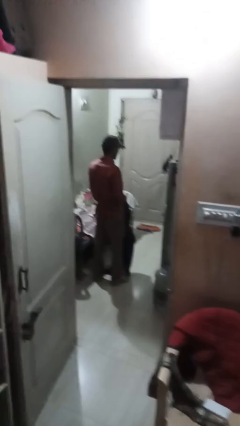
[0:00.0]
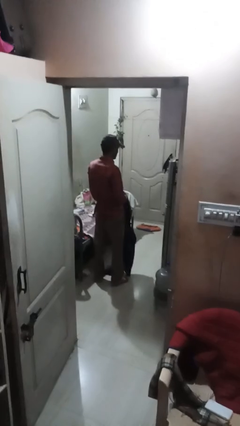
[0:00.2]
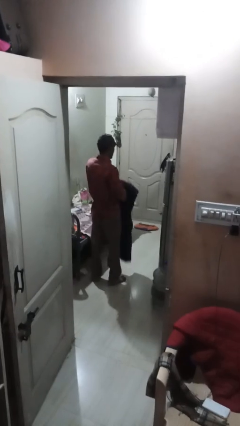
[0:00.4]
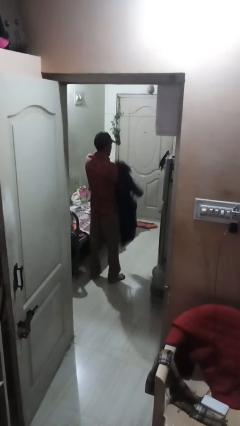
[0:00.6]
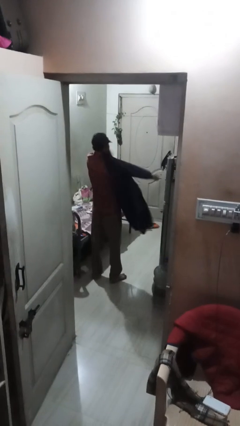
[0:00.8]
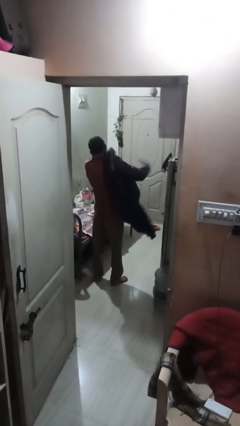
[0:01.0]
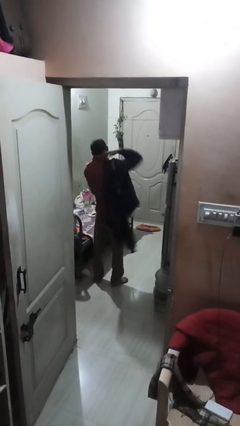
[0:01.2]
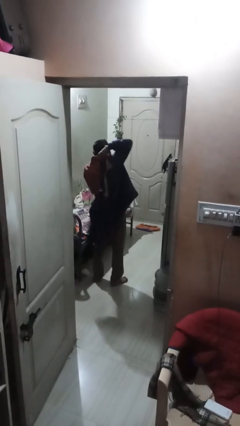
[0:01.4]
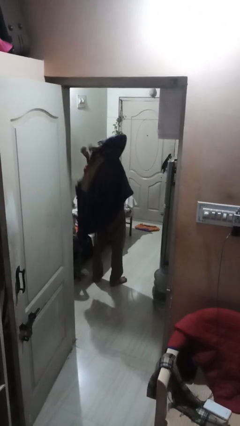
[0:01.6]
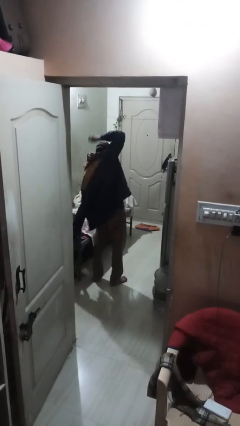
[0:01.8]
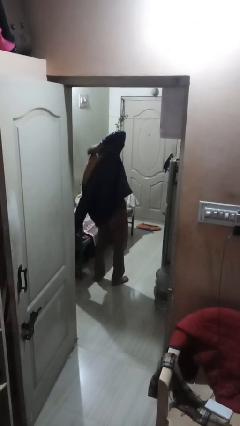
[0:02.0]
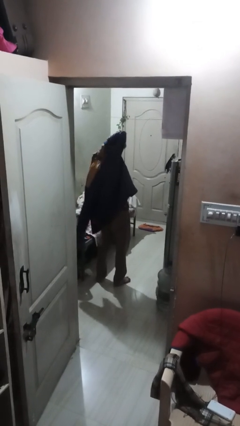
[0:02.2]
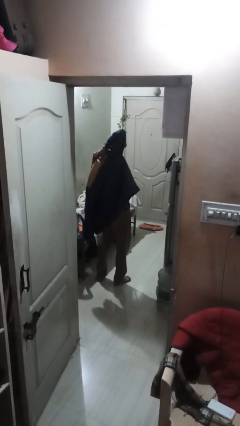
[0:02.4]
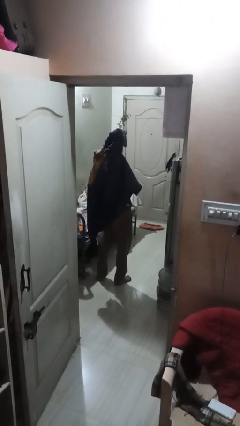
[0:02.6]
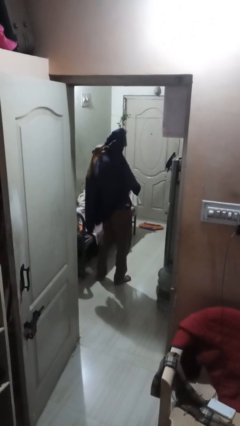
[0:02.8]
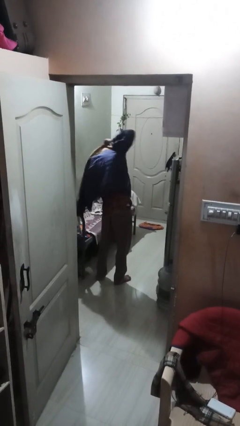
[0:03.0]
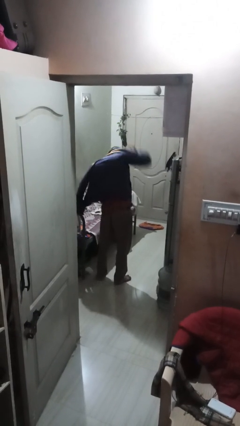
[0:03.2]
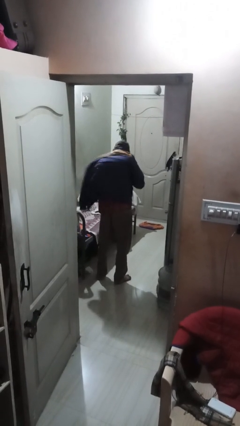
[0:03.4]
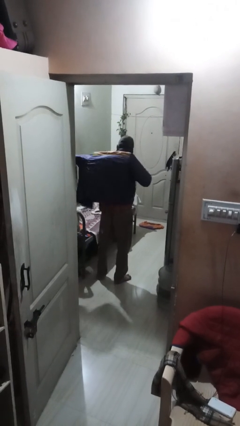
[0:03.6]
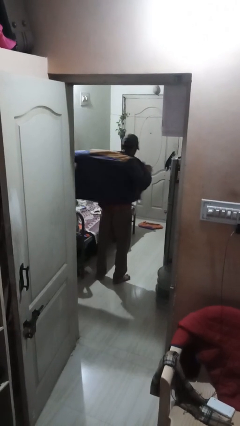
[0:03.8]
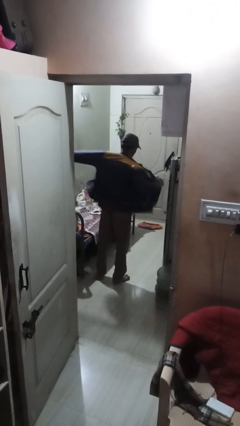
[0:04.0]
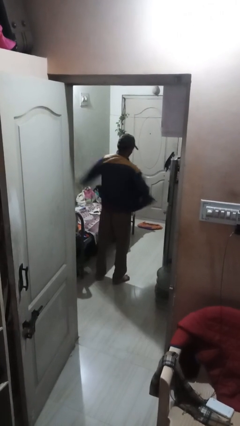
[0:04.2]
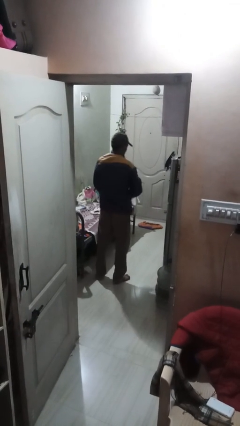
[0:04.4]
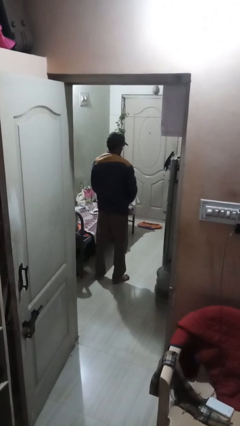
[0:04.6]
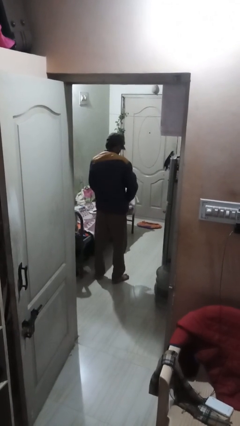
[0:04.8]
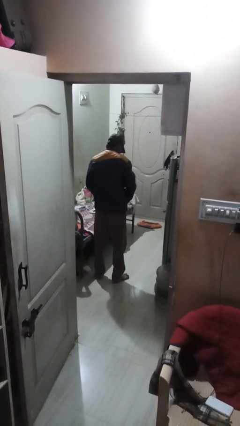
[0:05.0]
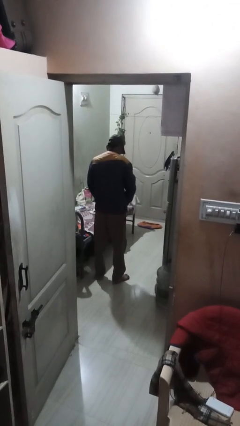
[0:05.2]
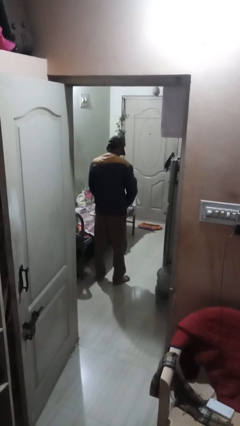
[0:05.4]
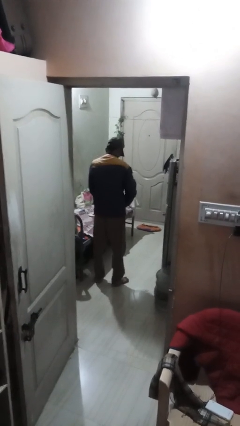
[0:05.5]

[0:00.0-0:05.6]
person puts on jacket

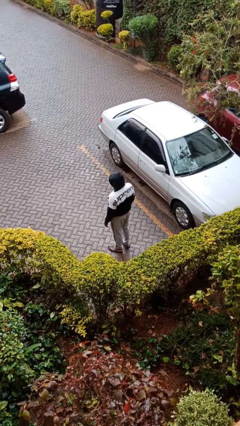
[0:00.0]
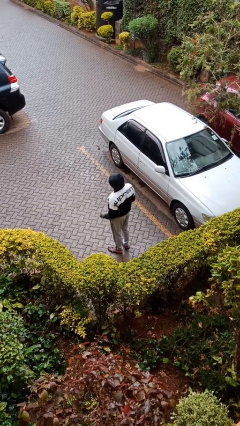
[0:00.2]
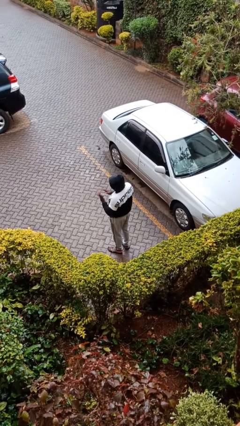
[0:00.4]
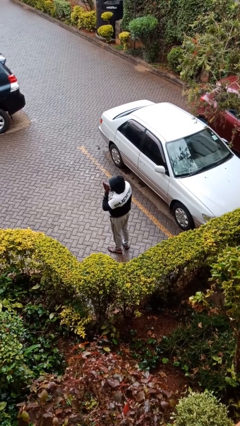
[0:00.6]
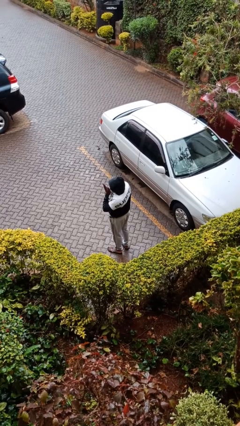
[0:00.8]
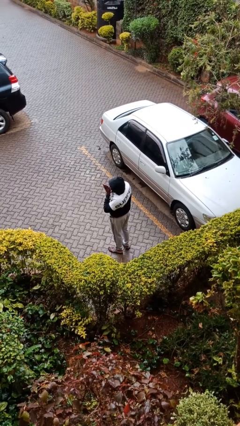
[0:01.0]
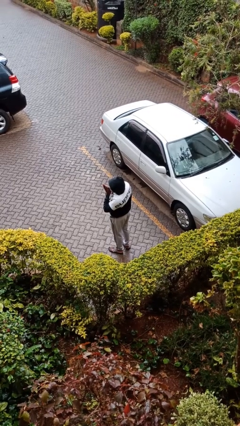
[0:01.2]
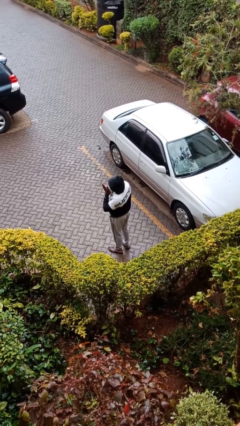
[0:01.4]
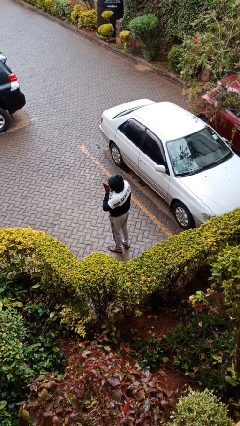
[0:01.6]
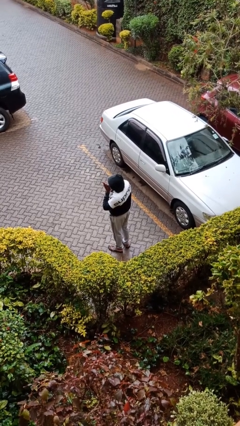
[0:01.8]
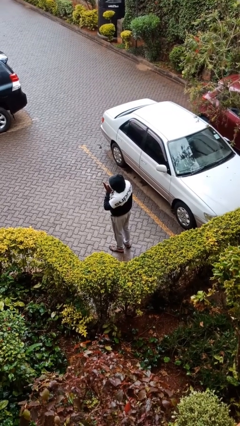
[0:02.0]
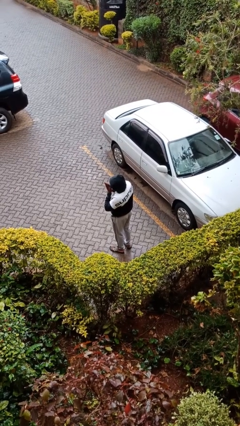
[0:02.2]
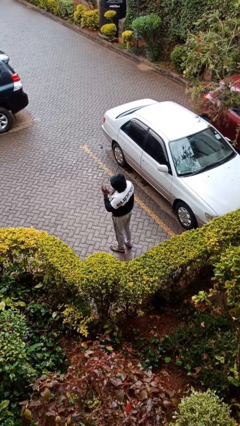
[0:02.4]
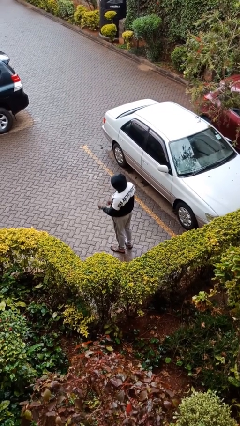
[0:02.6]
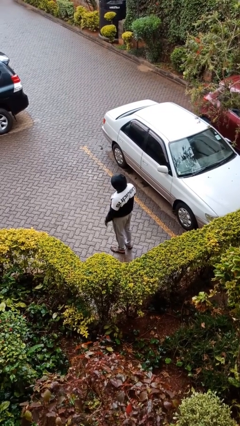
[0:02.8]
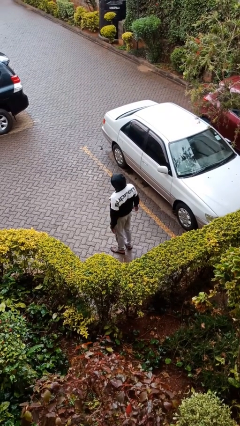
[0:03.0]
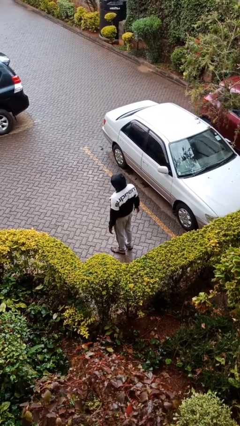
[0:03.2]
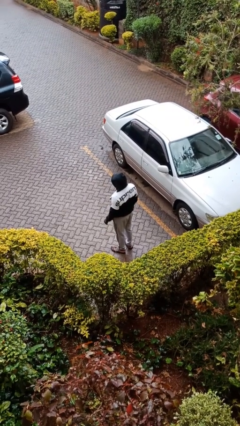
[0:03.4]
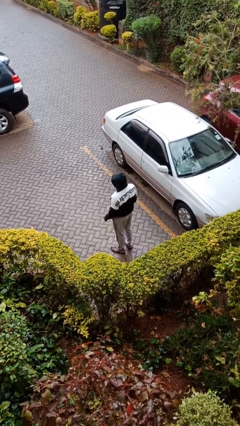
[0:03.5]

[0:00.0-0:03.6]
person blows into hands

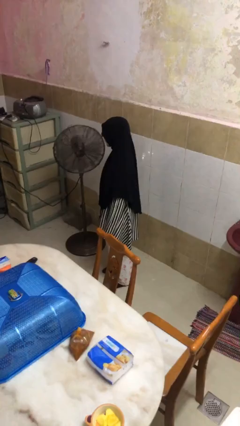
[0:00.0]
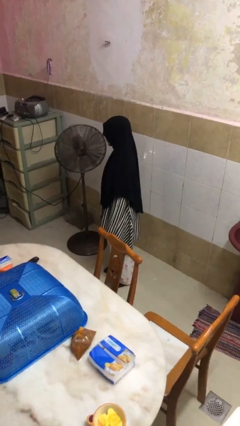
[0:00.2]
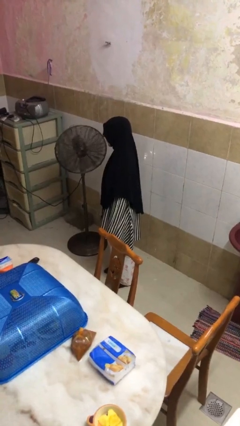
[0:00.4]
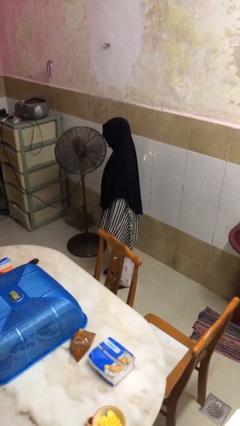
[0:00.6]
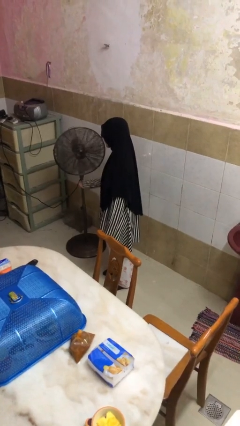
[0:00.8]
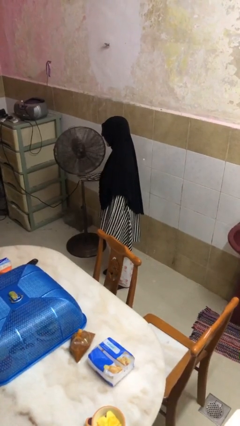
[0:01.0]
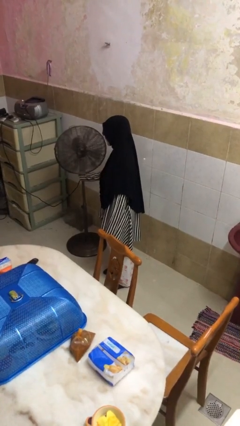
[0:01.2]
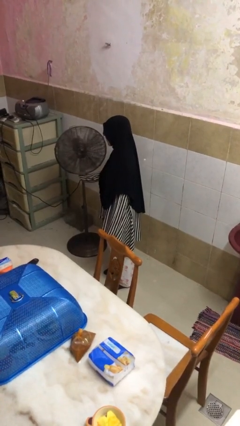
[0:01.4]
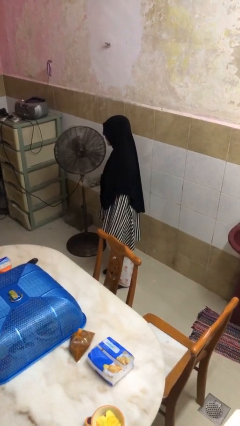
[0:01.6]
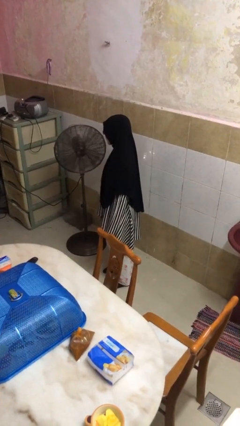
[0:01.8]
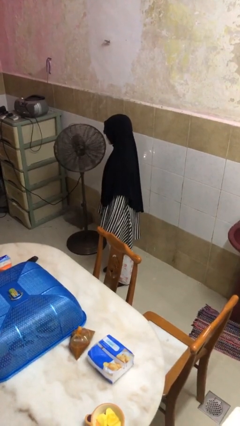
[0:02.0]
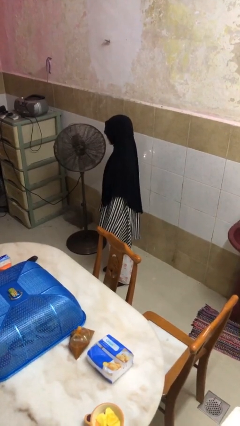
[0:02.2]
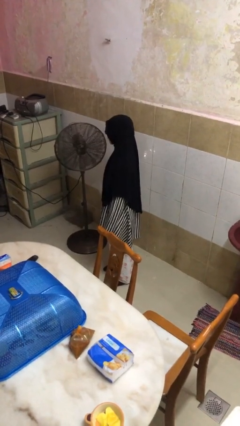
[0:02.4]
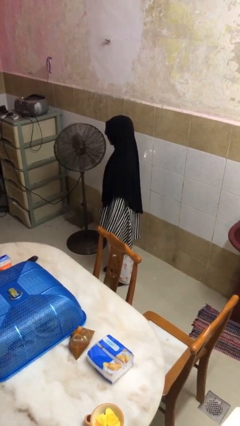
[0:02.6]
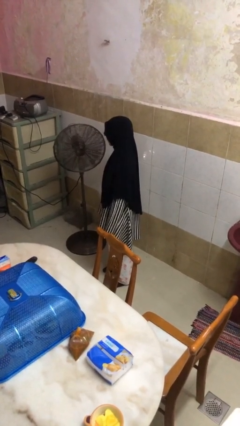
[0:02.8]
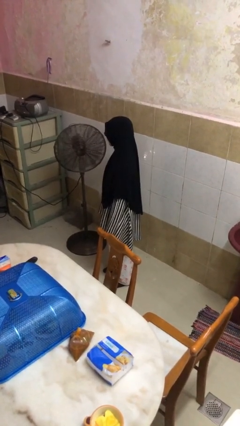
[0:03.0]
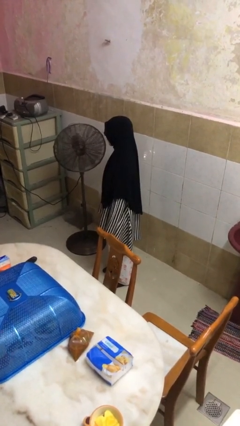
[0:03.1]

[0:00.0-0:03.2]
person turns on fan

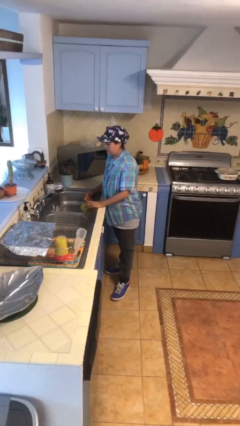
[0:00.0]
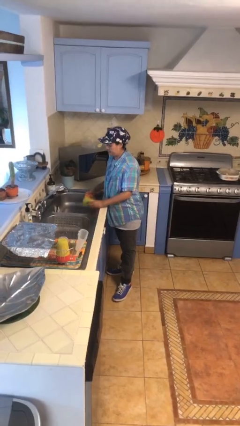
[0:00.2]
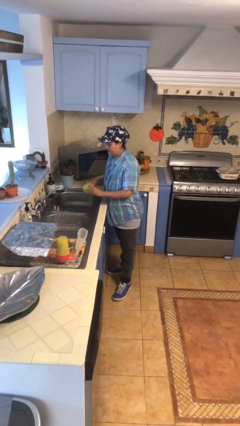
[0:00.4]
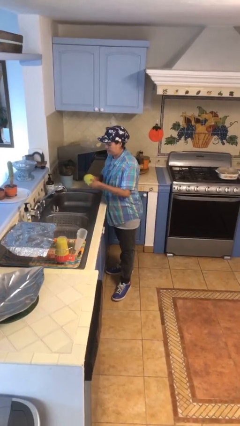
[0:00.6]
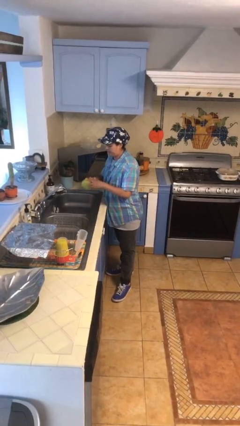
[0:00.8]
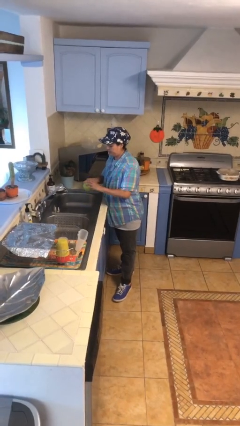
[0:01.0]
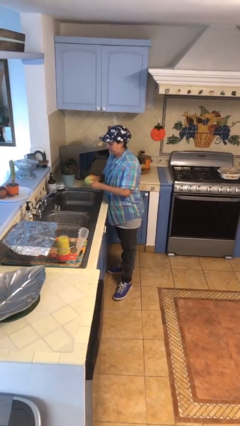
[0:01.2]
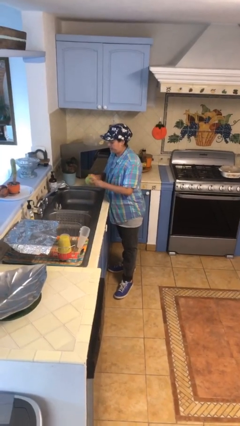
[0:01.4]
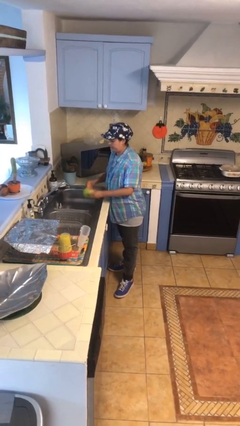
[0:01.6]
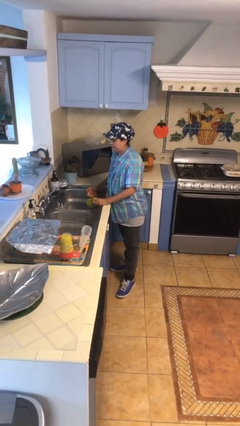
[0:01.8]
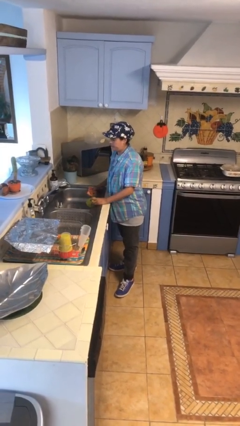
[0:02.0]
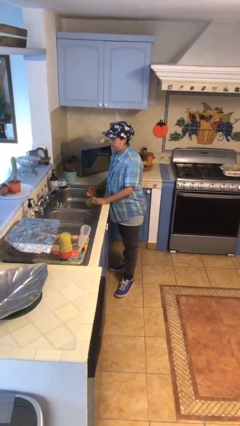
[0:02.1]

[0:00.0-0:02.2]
person washes dish

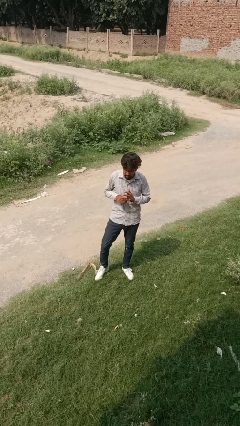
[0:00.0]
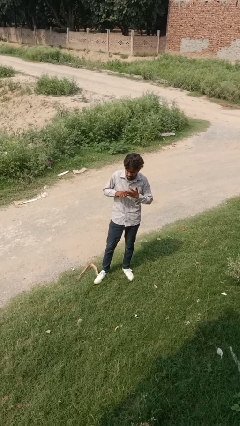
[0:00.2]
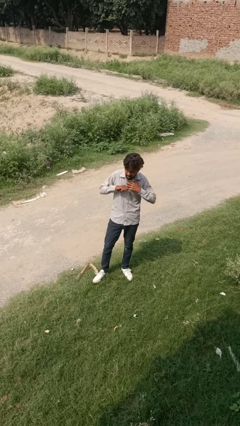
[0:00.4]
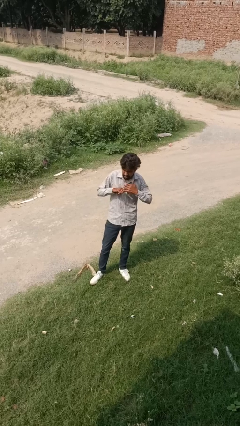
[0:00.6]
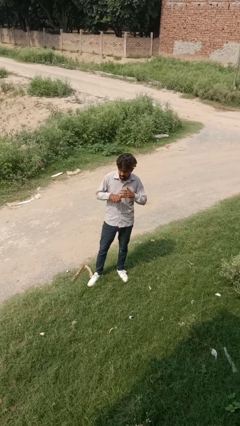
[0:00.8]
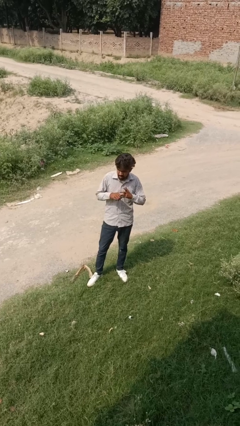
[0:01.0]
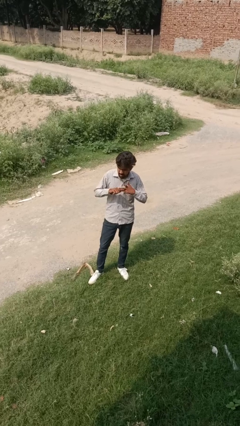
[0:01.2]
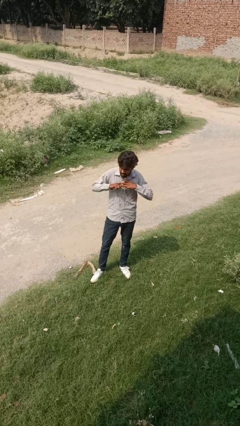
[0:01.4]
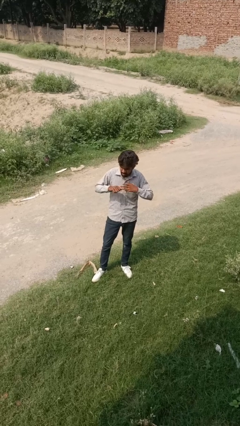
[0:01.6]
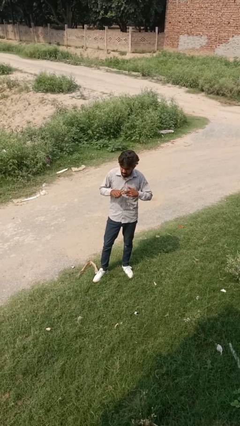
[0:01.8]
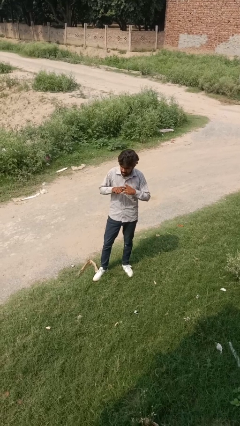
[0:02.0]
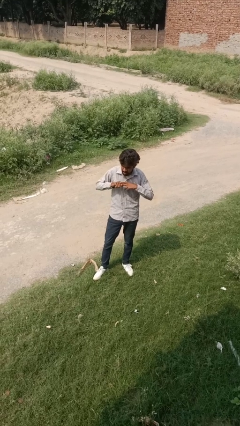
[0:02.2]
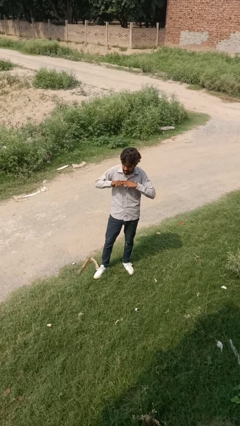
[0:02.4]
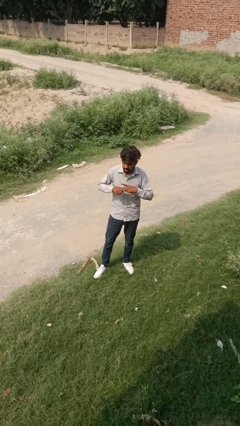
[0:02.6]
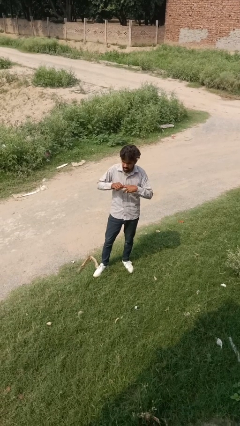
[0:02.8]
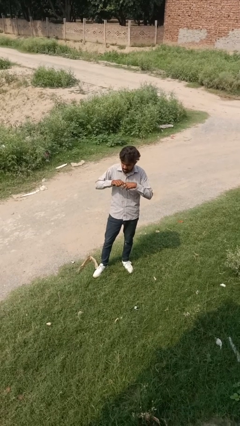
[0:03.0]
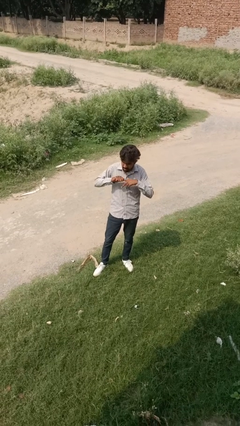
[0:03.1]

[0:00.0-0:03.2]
person cracks knuckles
